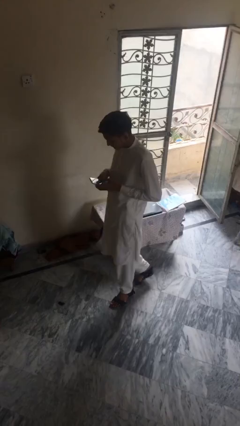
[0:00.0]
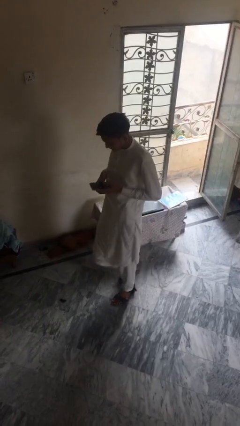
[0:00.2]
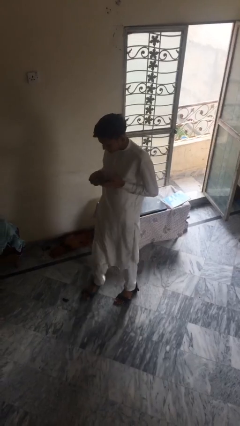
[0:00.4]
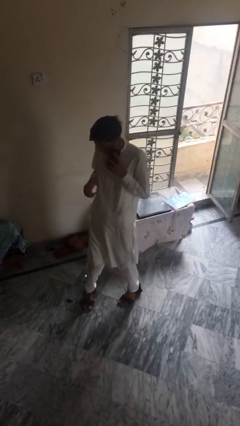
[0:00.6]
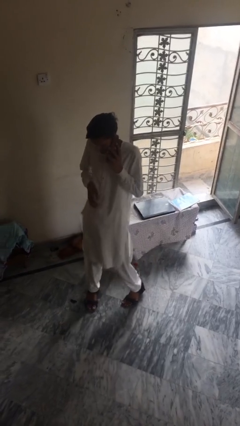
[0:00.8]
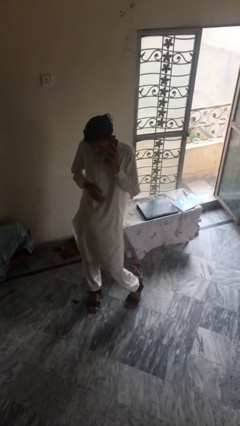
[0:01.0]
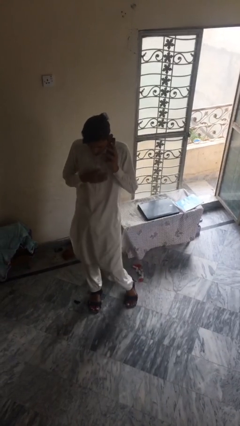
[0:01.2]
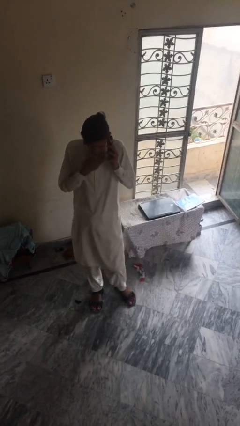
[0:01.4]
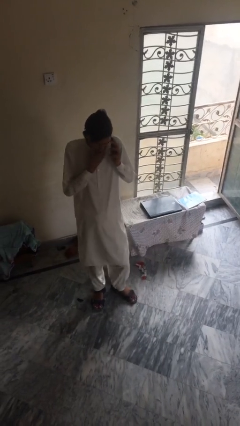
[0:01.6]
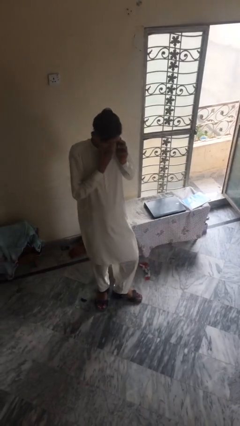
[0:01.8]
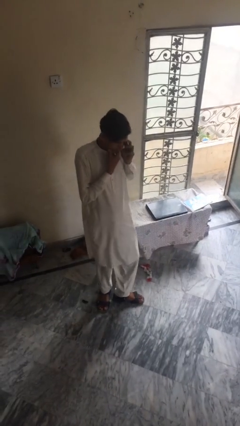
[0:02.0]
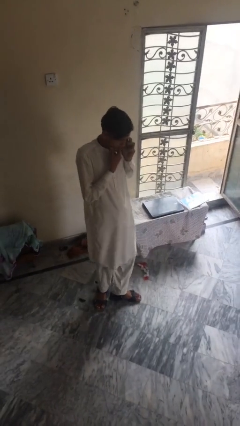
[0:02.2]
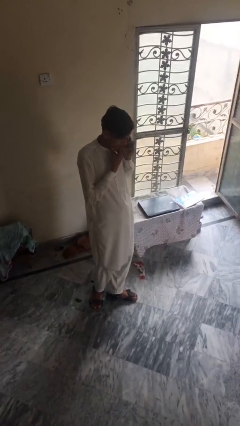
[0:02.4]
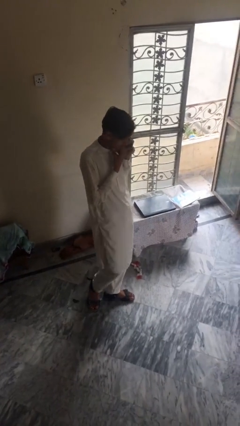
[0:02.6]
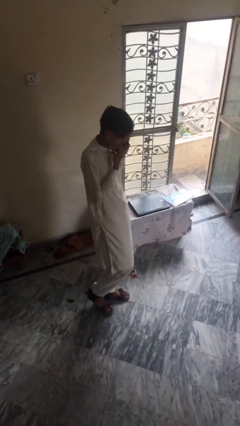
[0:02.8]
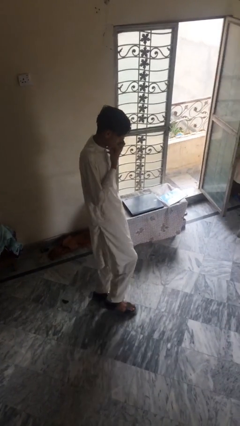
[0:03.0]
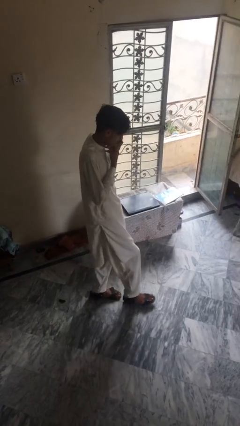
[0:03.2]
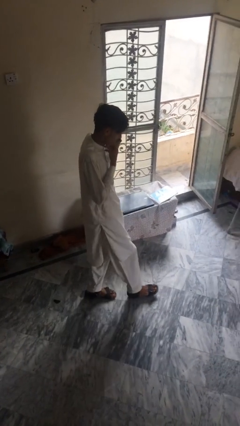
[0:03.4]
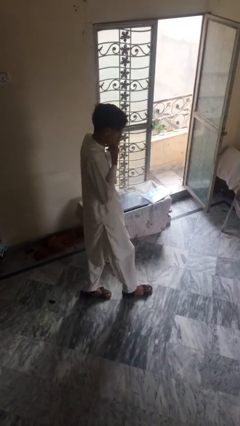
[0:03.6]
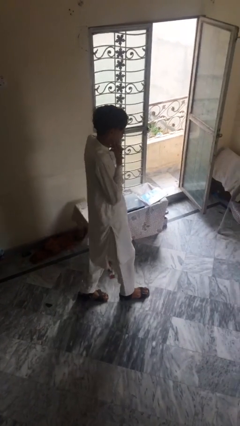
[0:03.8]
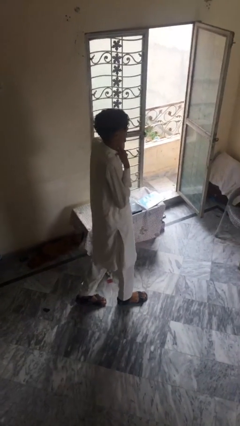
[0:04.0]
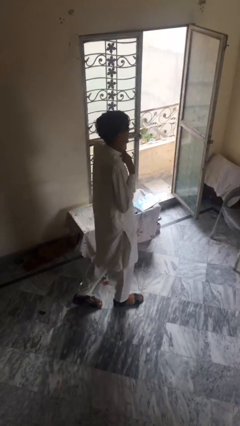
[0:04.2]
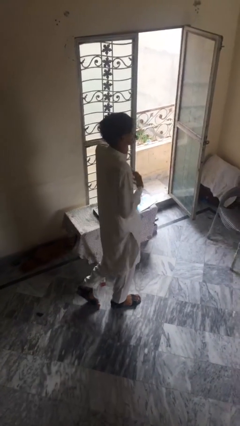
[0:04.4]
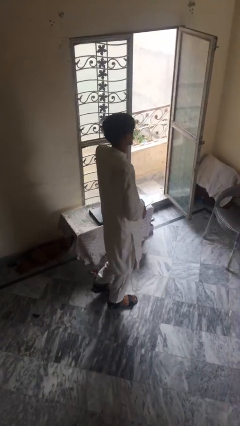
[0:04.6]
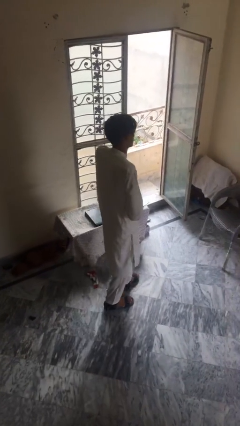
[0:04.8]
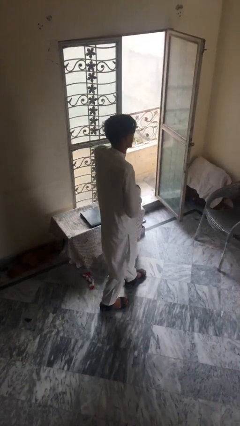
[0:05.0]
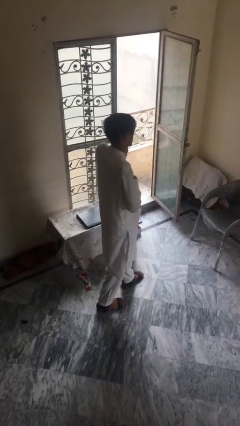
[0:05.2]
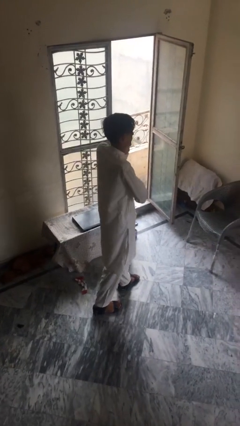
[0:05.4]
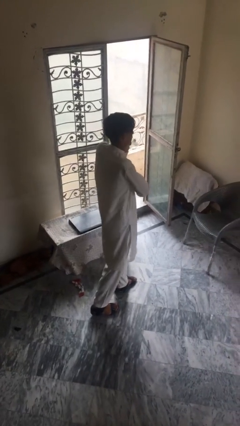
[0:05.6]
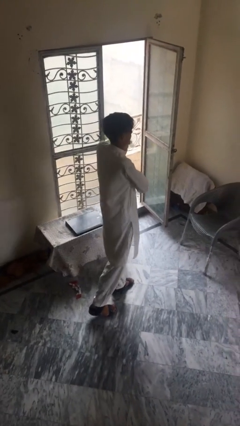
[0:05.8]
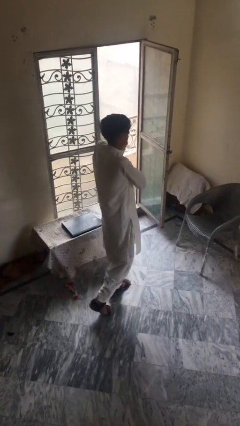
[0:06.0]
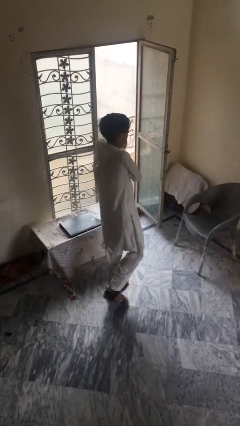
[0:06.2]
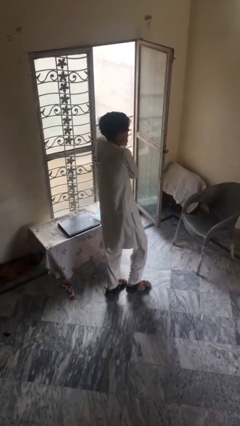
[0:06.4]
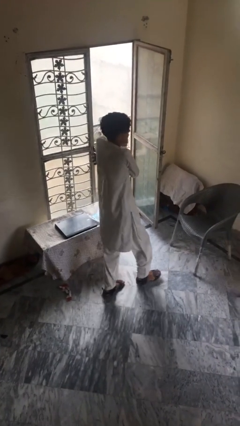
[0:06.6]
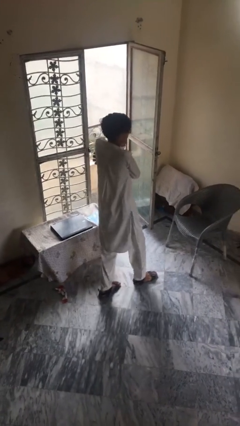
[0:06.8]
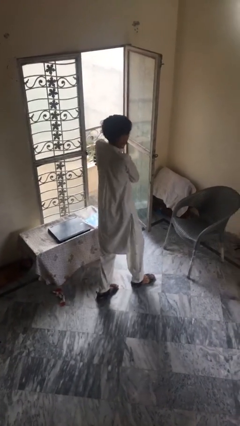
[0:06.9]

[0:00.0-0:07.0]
person talks on phone

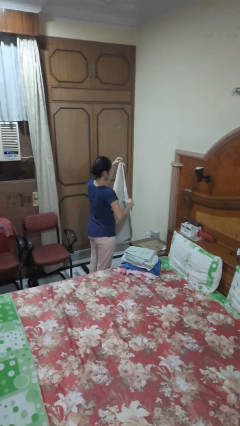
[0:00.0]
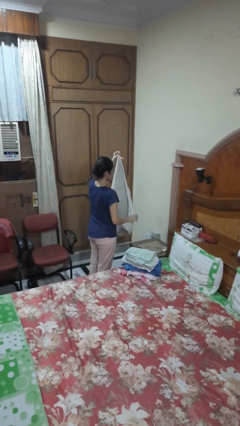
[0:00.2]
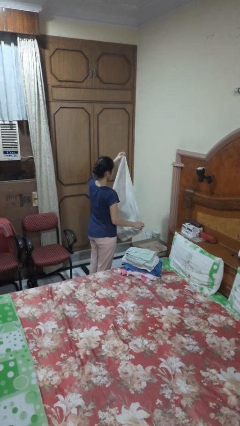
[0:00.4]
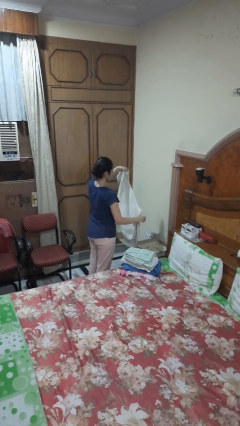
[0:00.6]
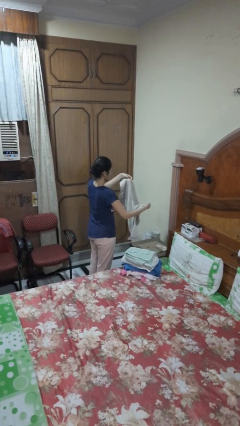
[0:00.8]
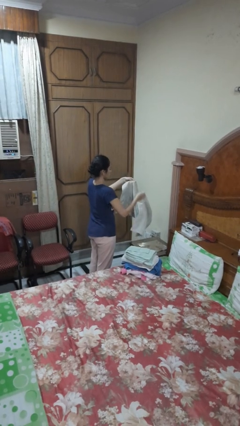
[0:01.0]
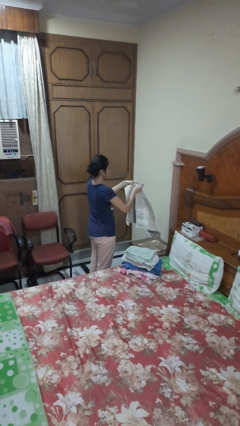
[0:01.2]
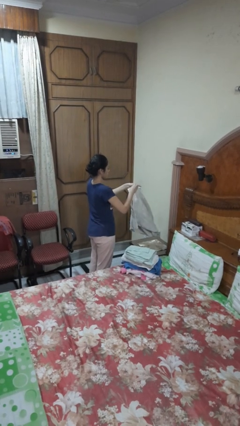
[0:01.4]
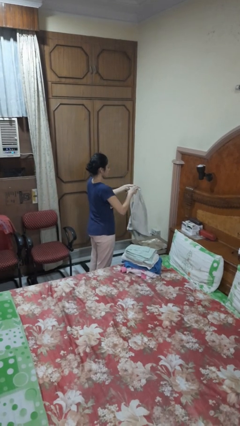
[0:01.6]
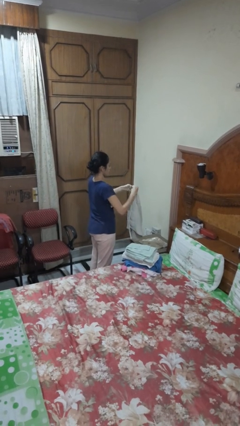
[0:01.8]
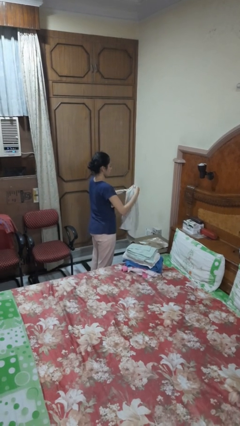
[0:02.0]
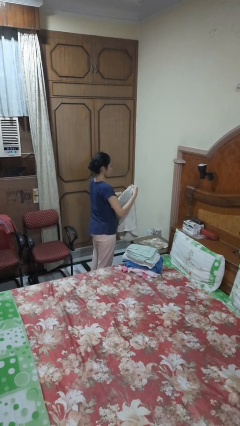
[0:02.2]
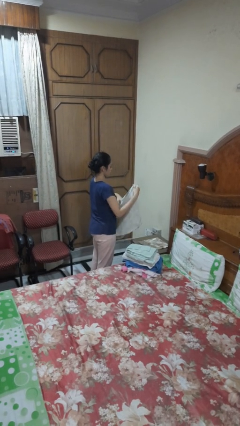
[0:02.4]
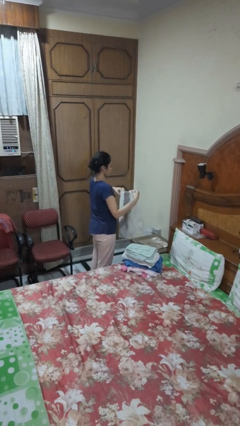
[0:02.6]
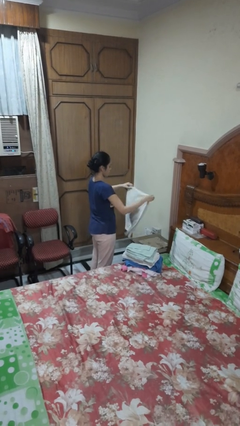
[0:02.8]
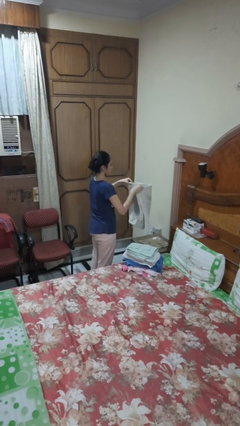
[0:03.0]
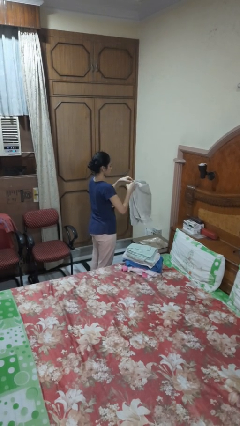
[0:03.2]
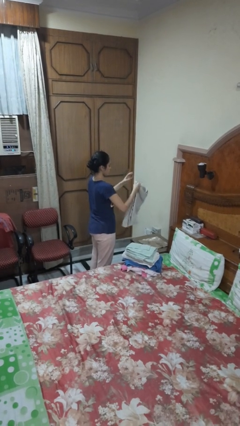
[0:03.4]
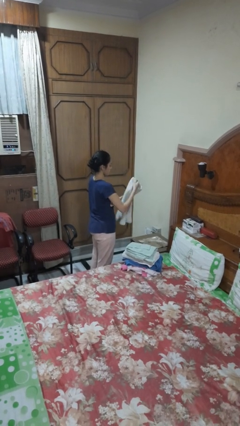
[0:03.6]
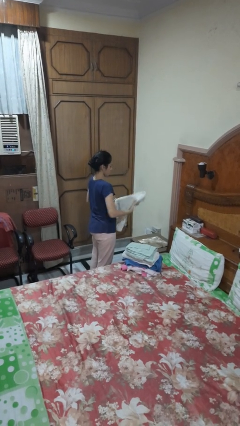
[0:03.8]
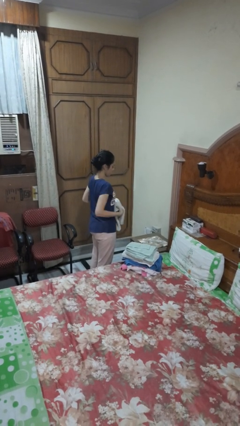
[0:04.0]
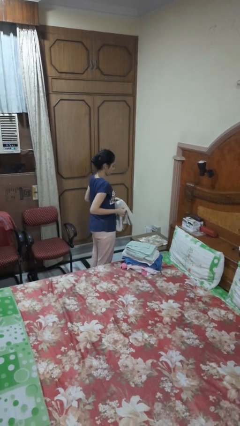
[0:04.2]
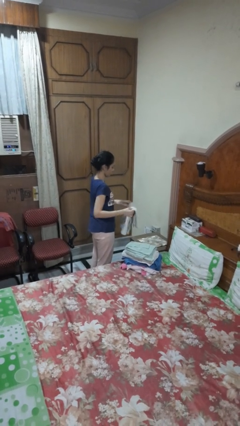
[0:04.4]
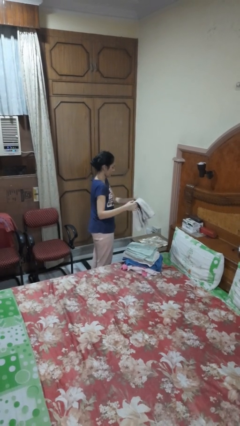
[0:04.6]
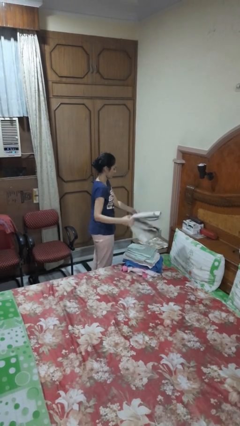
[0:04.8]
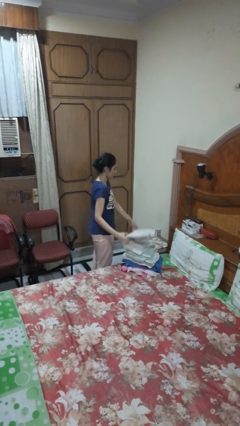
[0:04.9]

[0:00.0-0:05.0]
person folds towel

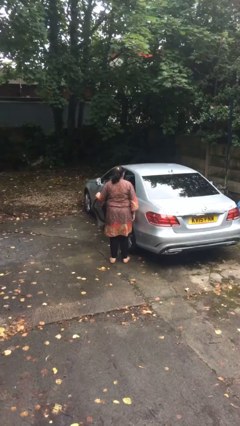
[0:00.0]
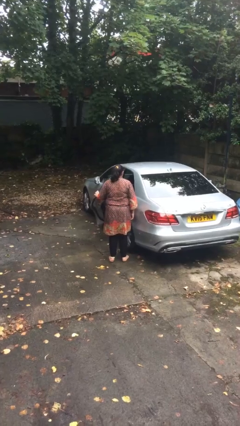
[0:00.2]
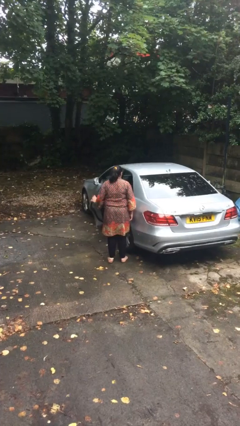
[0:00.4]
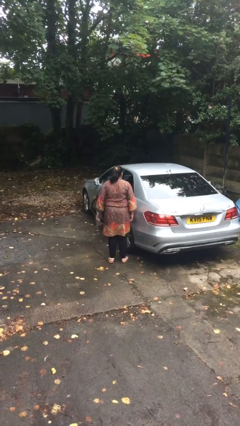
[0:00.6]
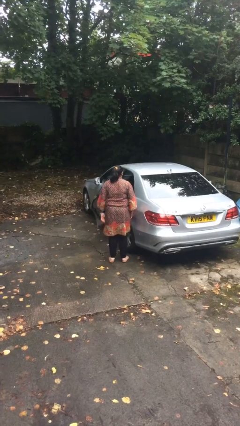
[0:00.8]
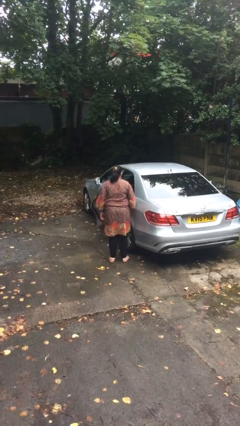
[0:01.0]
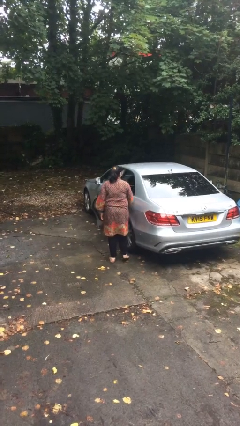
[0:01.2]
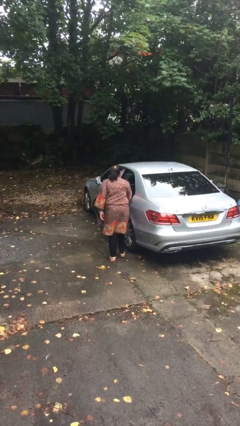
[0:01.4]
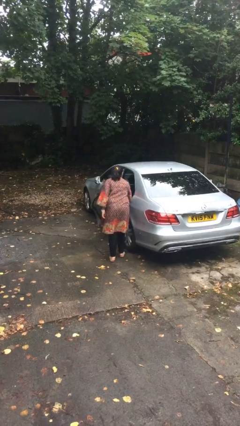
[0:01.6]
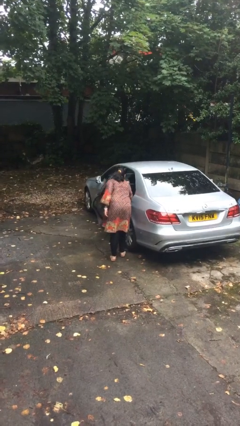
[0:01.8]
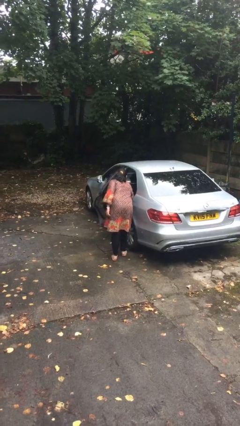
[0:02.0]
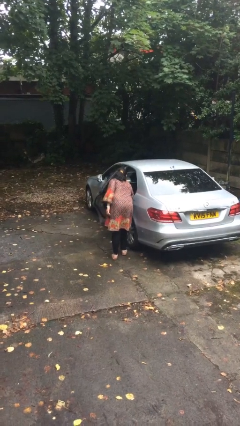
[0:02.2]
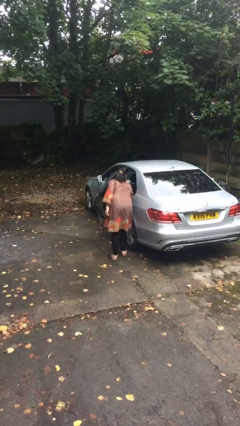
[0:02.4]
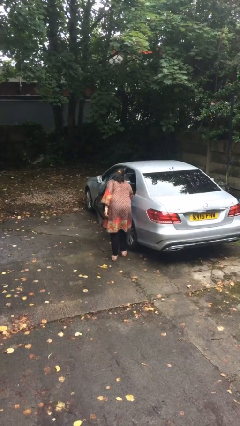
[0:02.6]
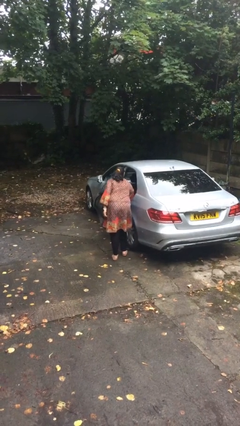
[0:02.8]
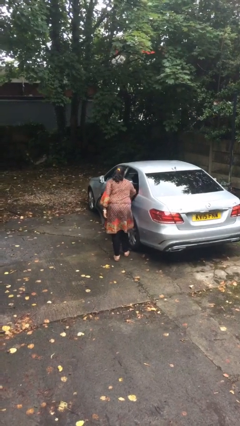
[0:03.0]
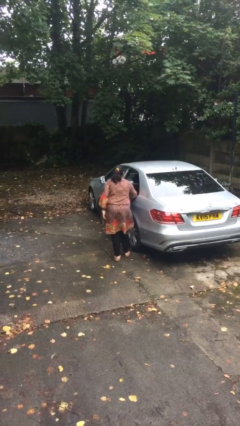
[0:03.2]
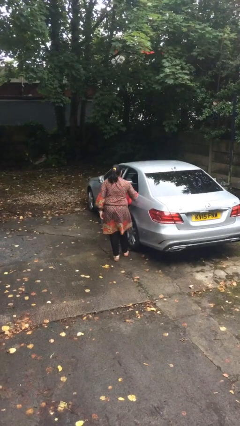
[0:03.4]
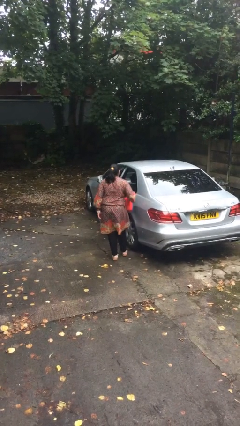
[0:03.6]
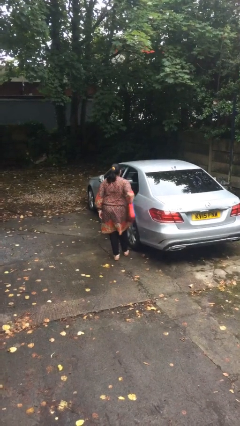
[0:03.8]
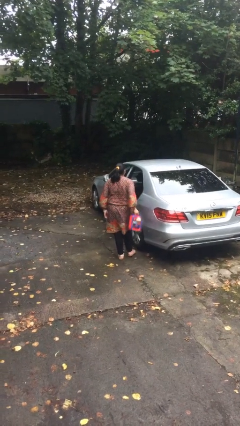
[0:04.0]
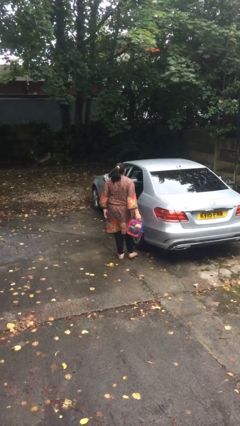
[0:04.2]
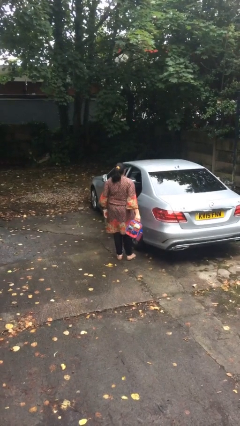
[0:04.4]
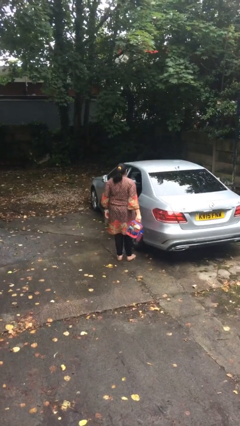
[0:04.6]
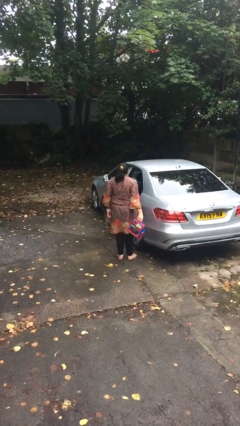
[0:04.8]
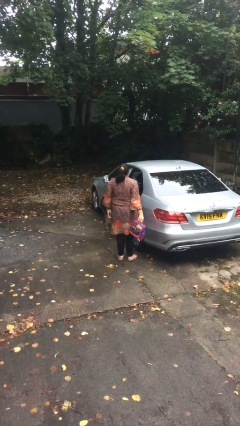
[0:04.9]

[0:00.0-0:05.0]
person unloads car

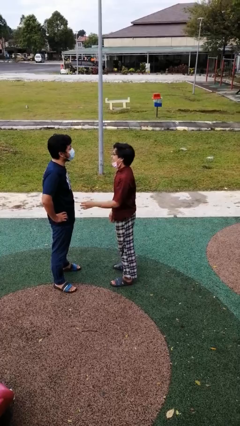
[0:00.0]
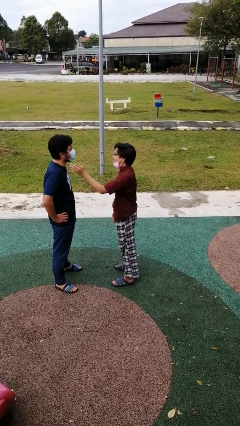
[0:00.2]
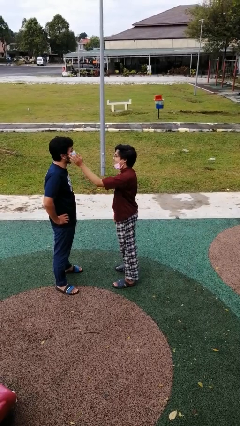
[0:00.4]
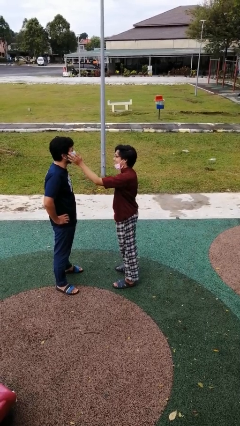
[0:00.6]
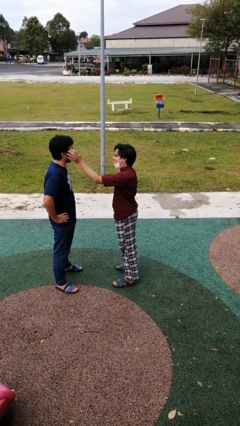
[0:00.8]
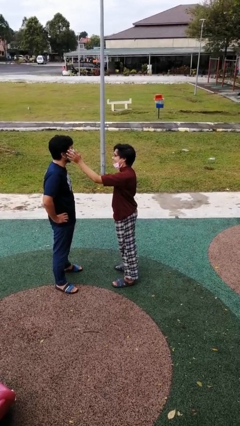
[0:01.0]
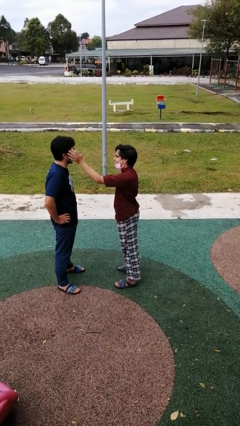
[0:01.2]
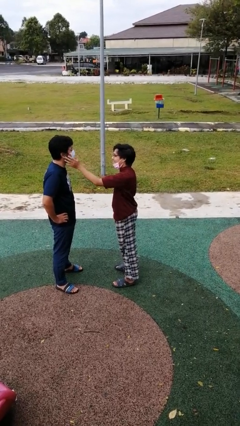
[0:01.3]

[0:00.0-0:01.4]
person touches face of person
